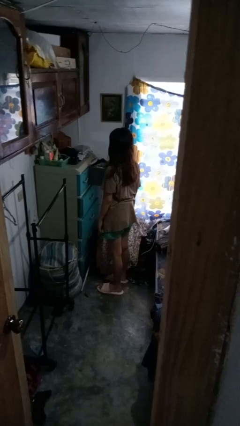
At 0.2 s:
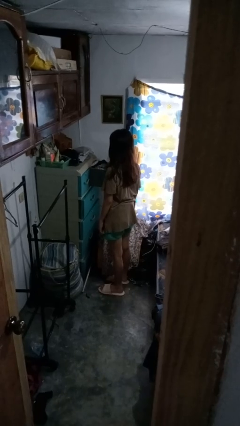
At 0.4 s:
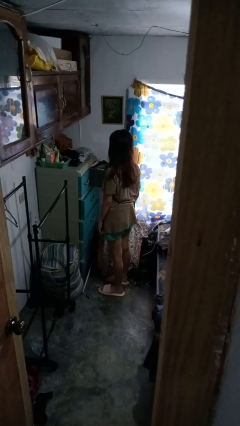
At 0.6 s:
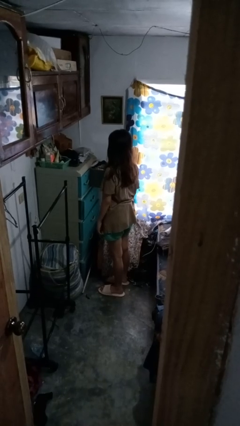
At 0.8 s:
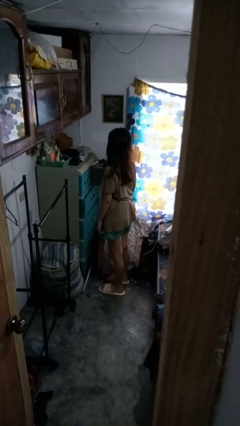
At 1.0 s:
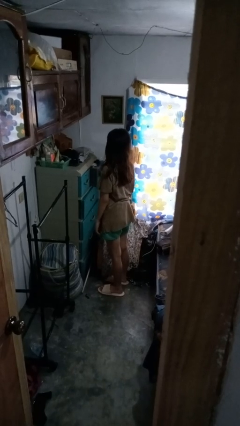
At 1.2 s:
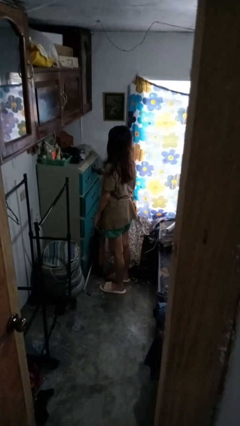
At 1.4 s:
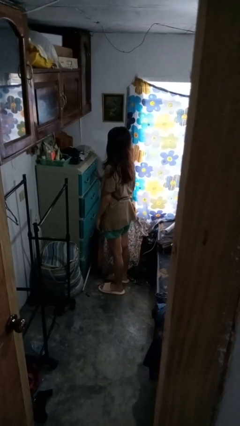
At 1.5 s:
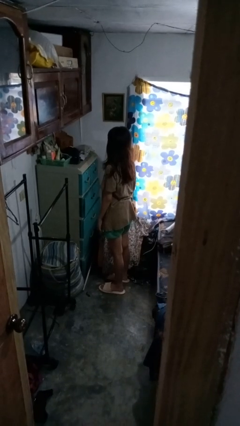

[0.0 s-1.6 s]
person closes dresser drawer

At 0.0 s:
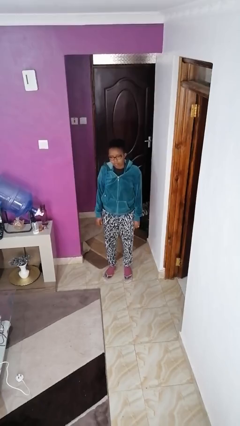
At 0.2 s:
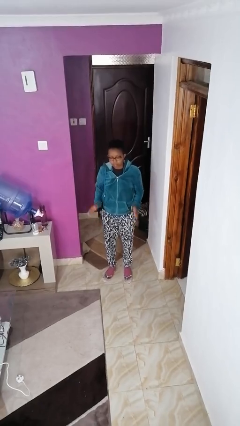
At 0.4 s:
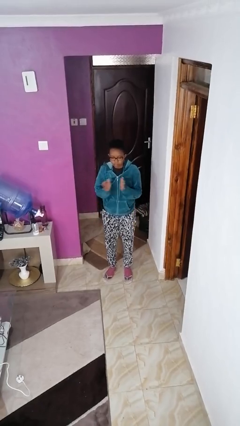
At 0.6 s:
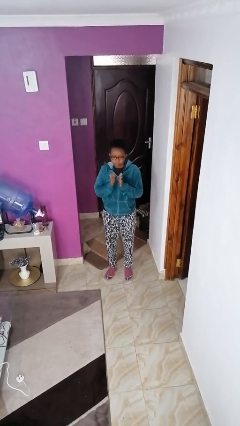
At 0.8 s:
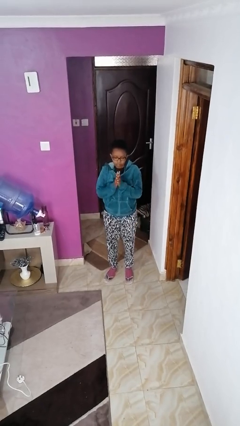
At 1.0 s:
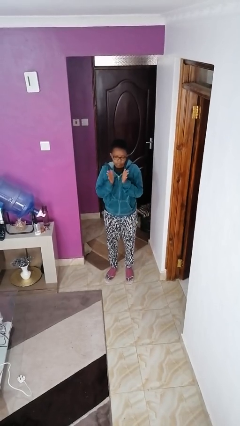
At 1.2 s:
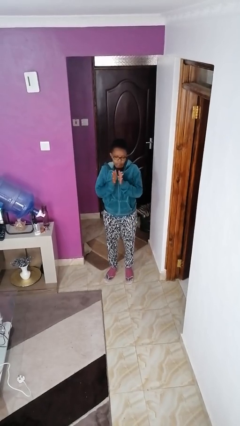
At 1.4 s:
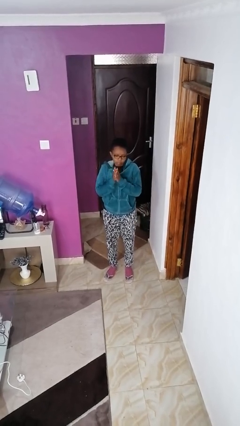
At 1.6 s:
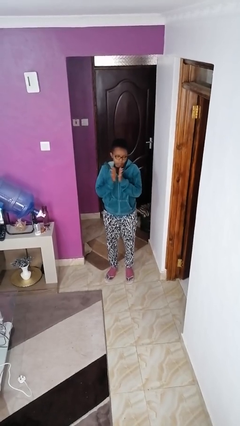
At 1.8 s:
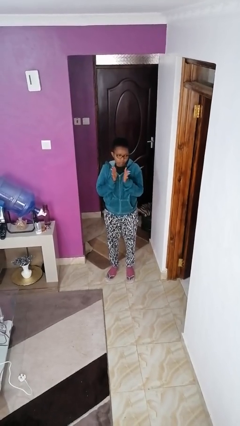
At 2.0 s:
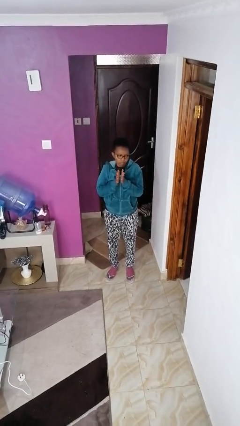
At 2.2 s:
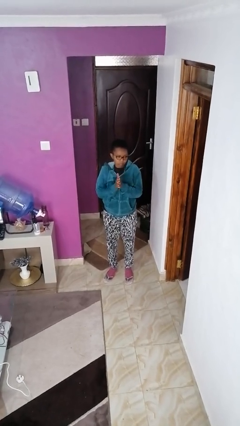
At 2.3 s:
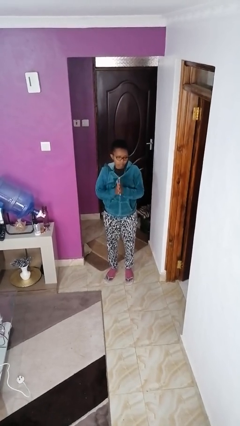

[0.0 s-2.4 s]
person claps hands

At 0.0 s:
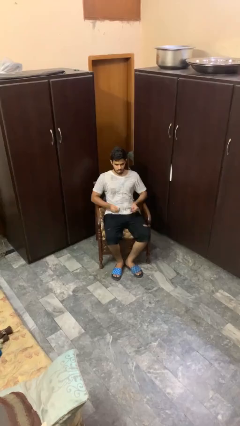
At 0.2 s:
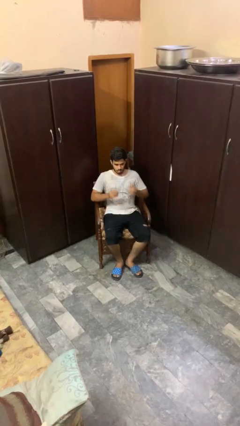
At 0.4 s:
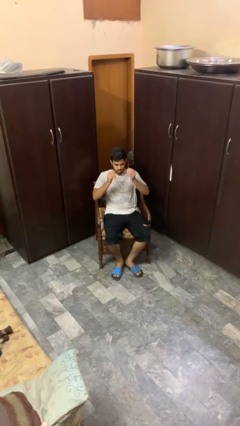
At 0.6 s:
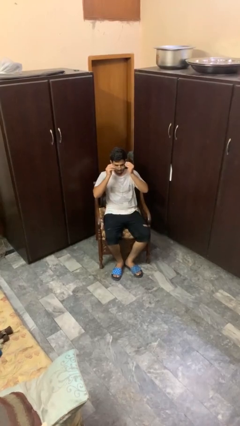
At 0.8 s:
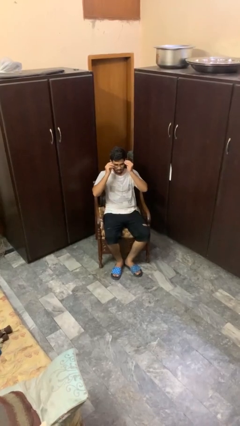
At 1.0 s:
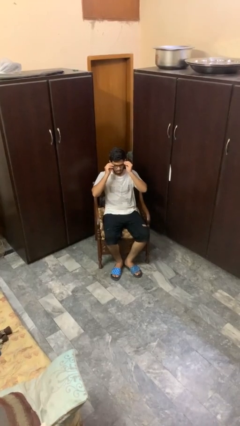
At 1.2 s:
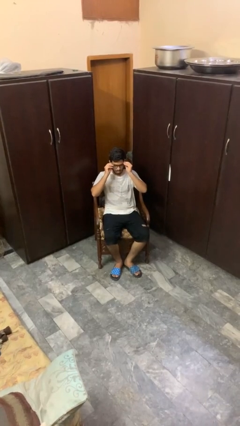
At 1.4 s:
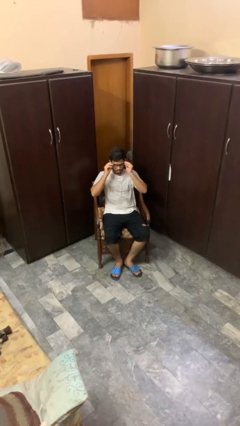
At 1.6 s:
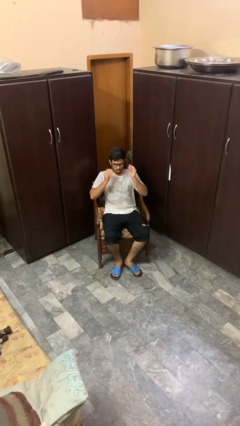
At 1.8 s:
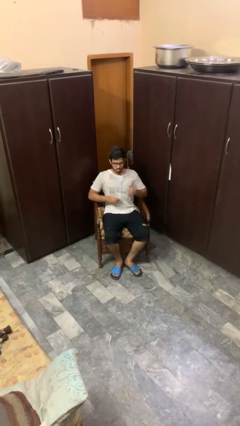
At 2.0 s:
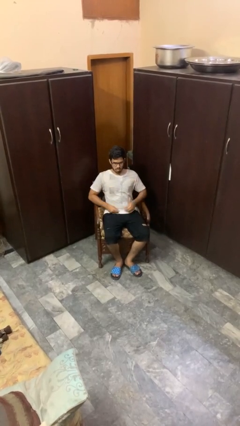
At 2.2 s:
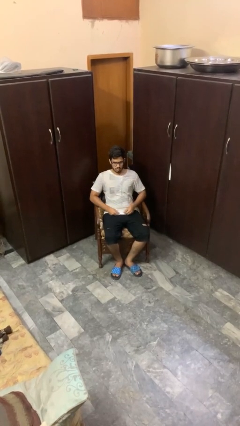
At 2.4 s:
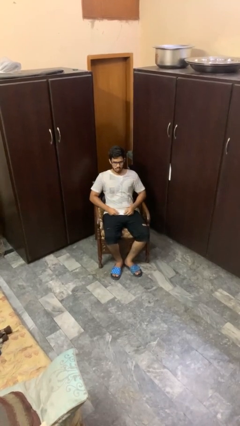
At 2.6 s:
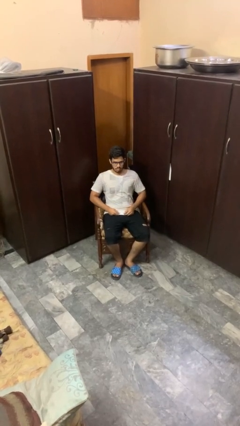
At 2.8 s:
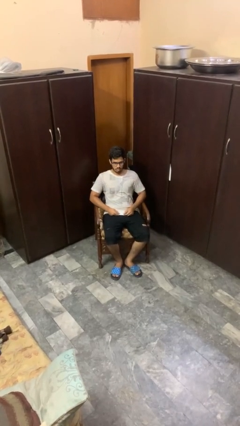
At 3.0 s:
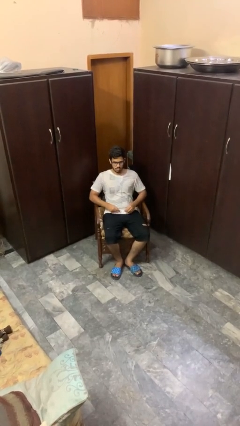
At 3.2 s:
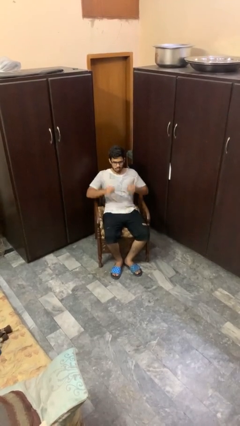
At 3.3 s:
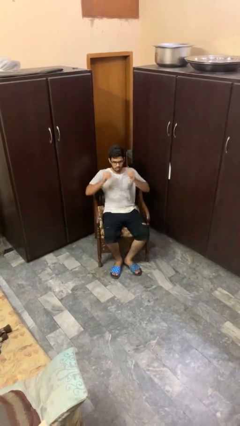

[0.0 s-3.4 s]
person puts on glasses

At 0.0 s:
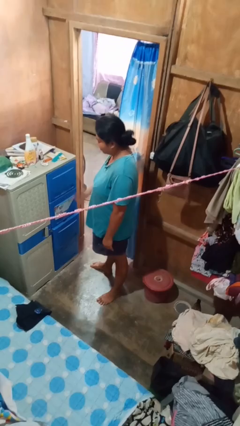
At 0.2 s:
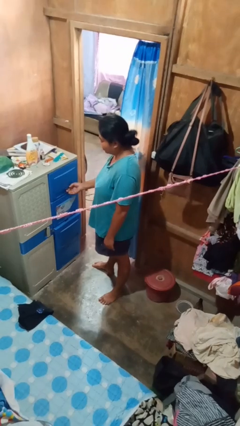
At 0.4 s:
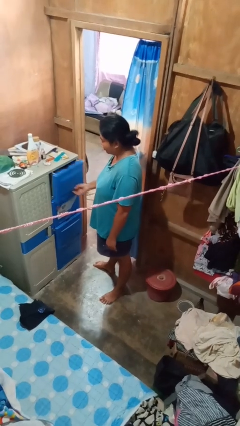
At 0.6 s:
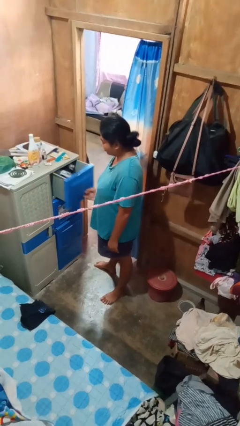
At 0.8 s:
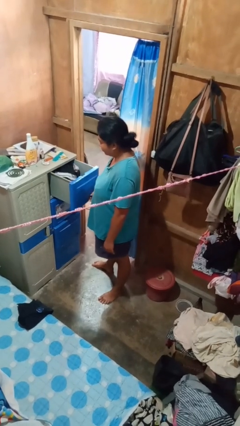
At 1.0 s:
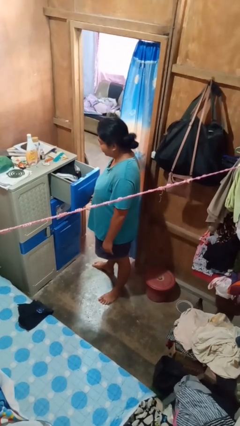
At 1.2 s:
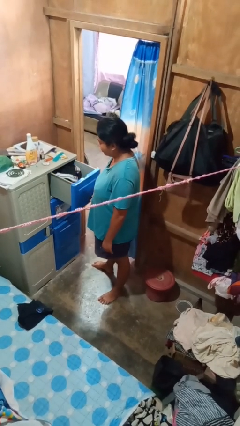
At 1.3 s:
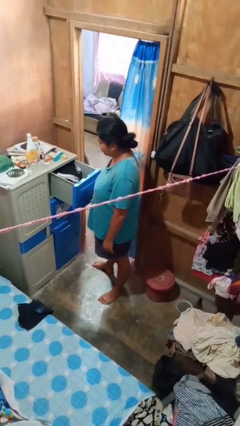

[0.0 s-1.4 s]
person opens dresser drawer

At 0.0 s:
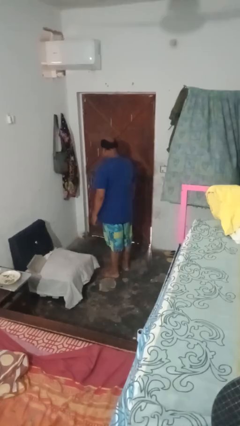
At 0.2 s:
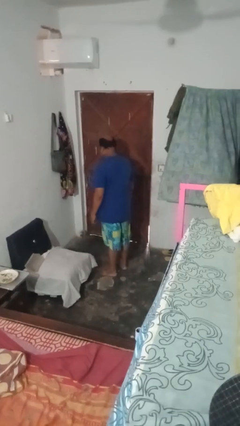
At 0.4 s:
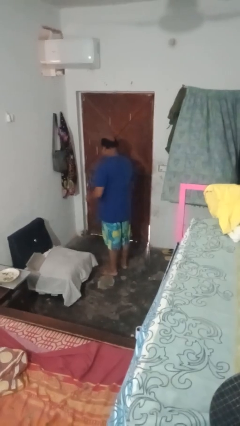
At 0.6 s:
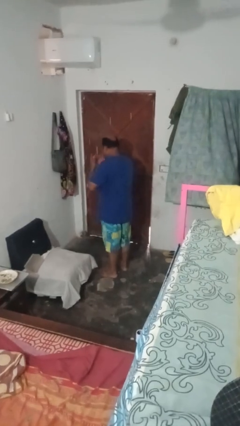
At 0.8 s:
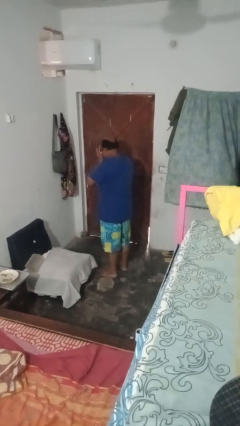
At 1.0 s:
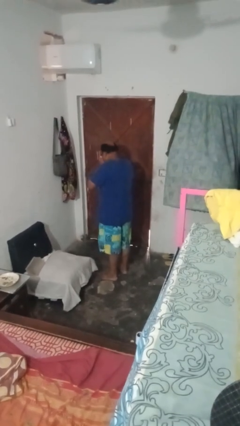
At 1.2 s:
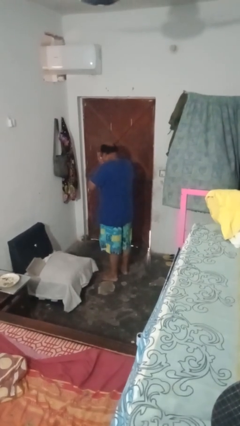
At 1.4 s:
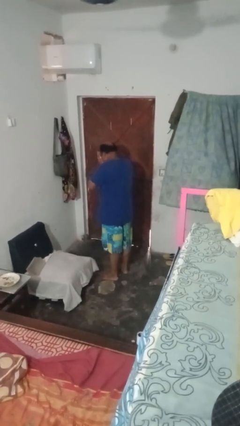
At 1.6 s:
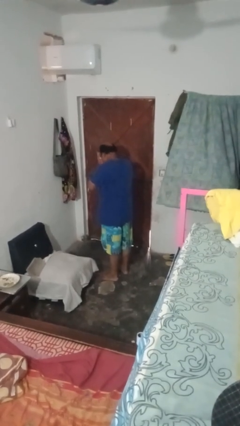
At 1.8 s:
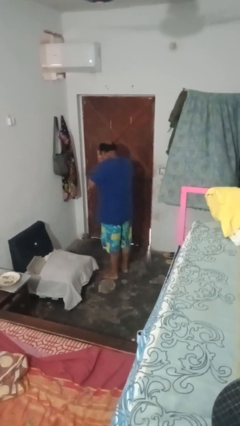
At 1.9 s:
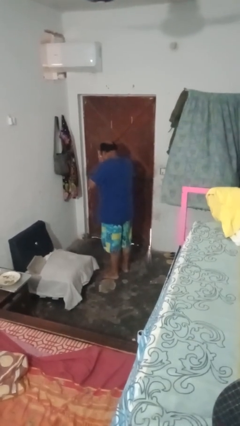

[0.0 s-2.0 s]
person covers face with hands

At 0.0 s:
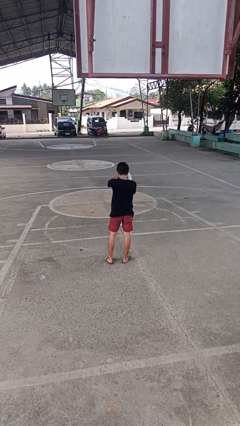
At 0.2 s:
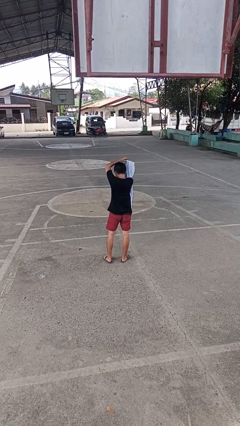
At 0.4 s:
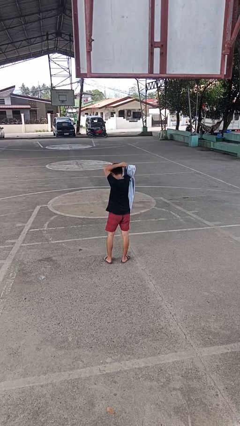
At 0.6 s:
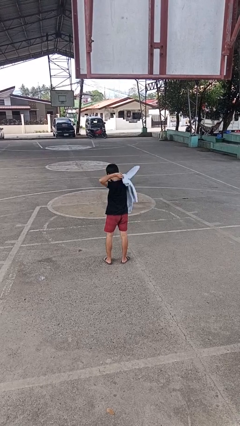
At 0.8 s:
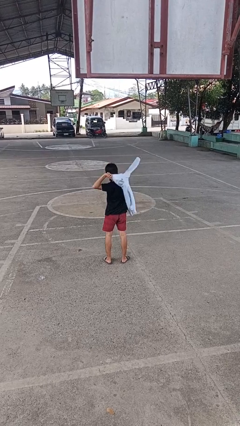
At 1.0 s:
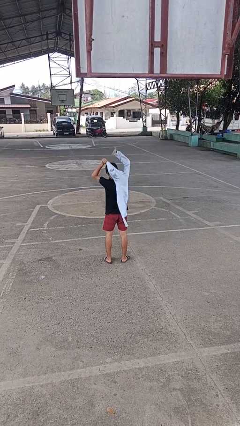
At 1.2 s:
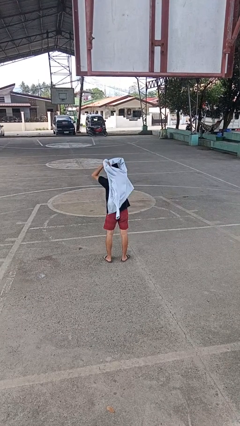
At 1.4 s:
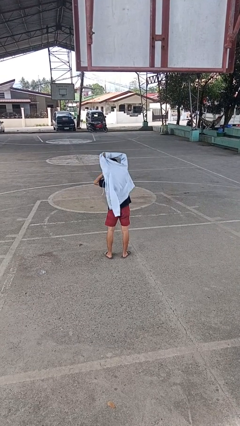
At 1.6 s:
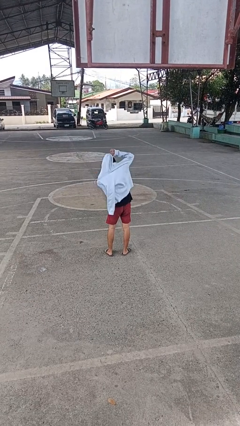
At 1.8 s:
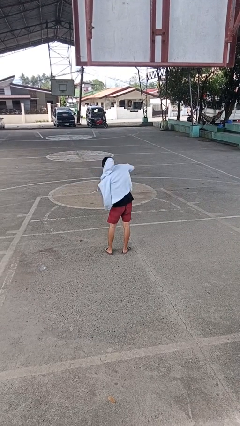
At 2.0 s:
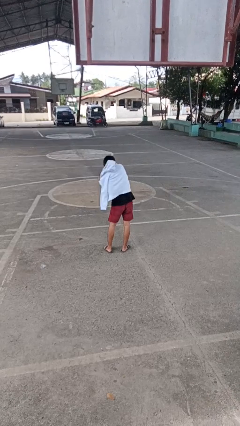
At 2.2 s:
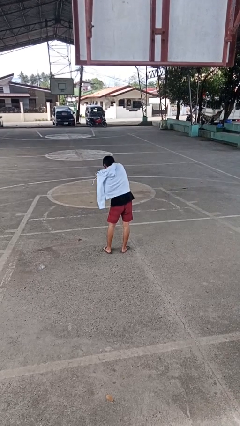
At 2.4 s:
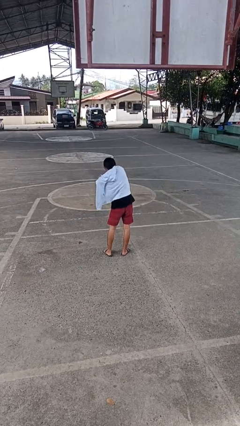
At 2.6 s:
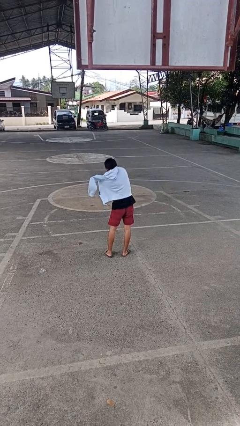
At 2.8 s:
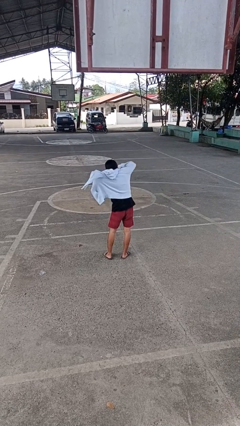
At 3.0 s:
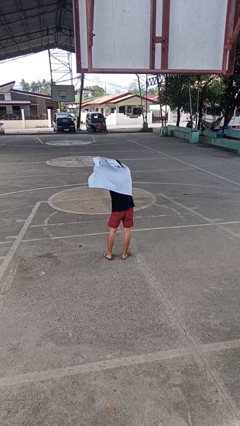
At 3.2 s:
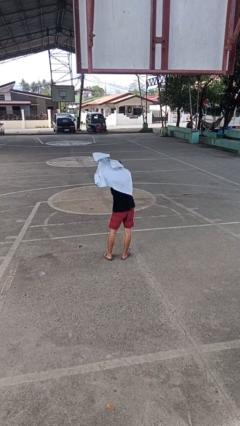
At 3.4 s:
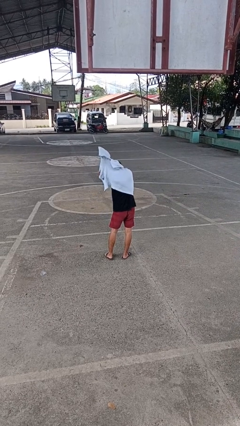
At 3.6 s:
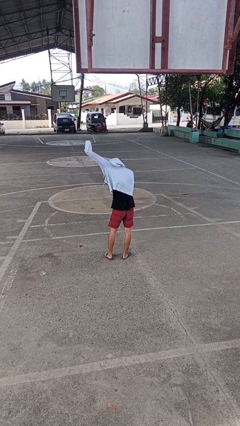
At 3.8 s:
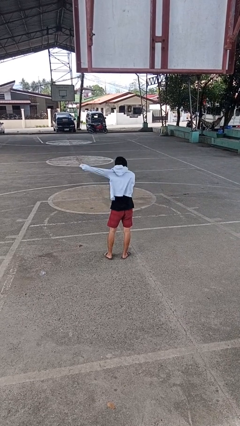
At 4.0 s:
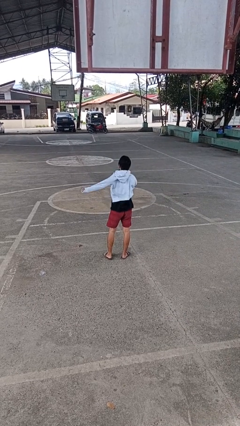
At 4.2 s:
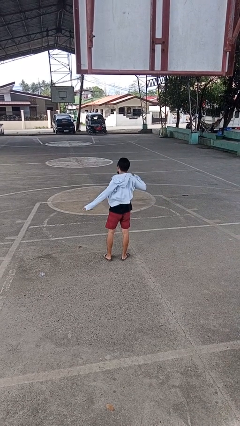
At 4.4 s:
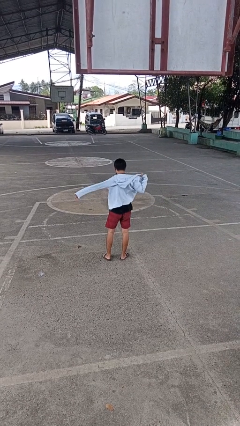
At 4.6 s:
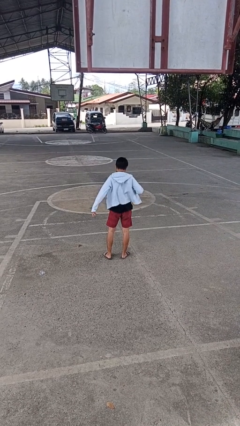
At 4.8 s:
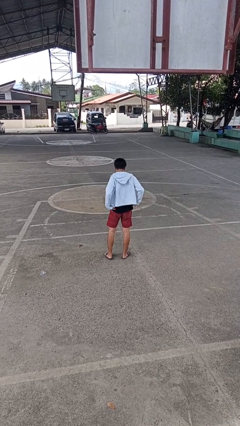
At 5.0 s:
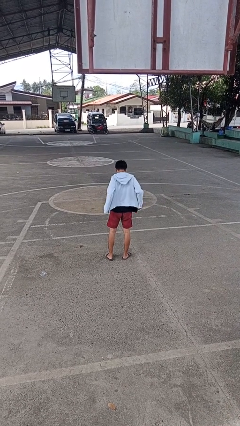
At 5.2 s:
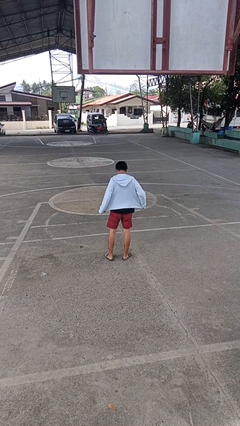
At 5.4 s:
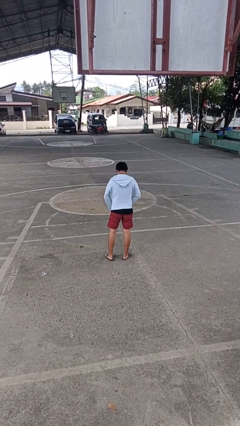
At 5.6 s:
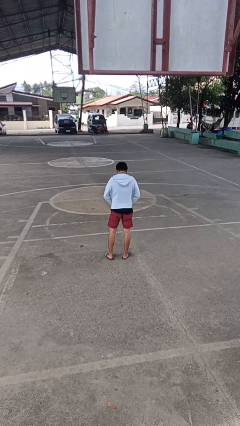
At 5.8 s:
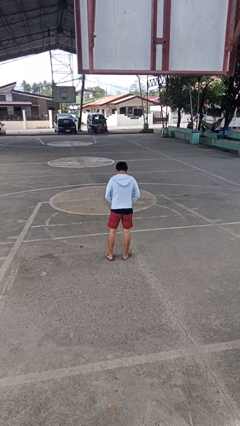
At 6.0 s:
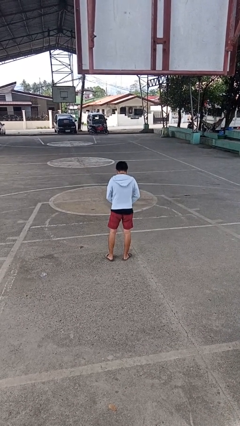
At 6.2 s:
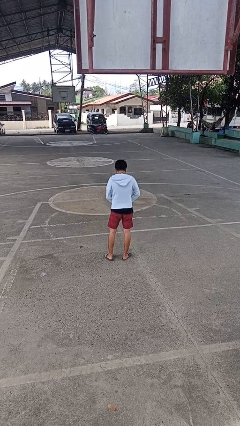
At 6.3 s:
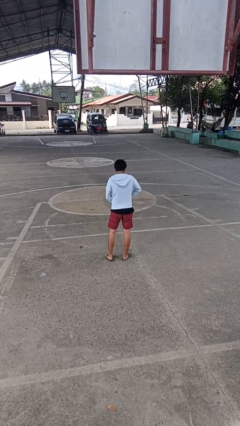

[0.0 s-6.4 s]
person puts on jacket

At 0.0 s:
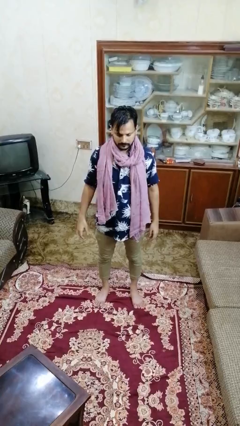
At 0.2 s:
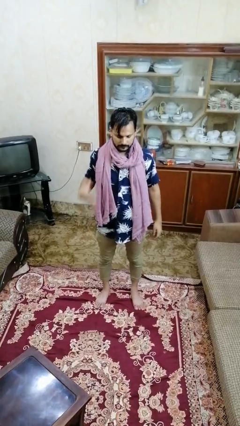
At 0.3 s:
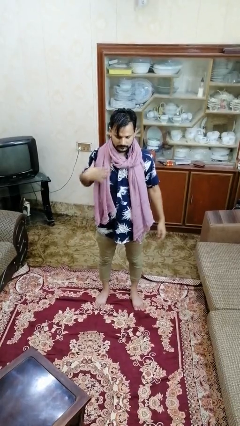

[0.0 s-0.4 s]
person takes off scarf
